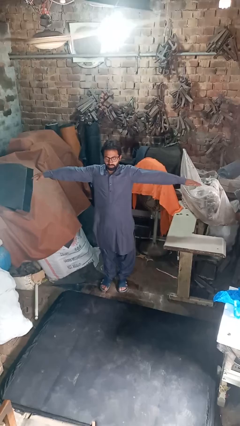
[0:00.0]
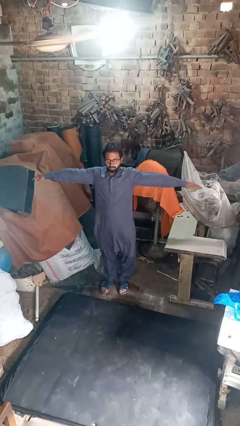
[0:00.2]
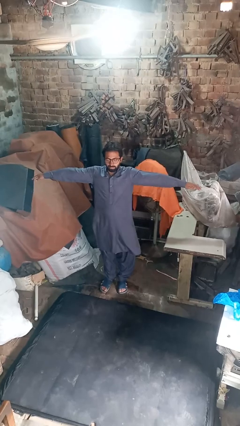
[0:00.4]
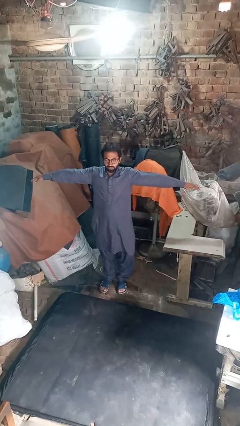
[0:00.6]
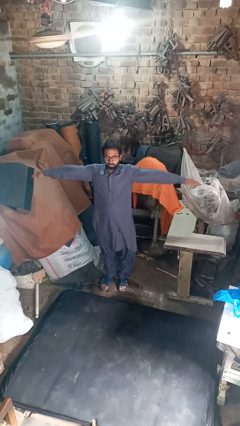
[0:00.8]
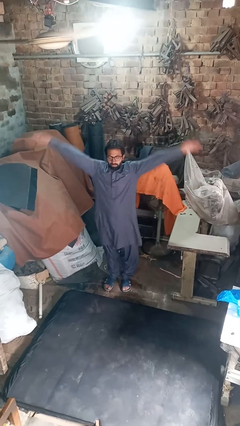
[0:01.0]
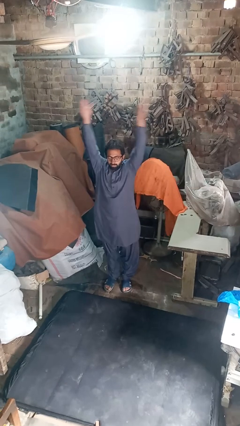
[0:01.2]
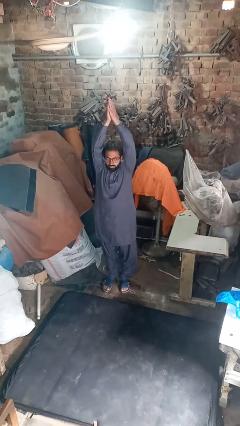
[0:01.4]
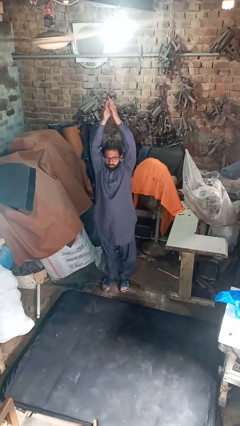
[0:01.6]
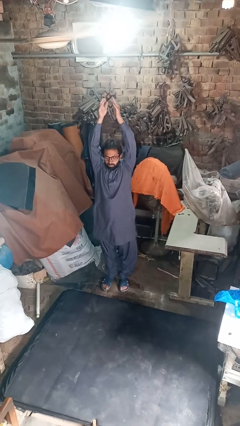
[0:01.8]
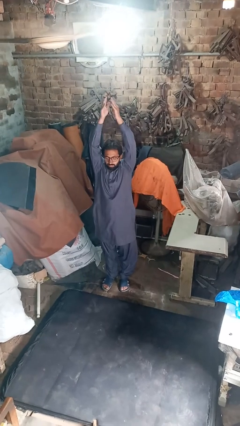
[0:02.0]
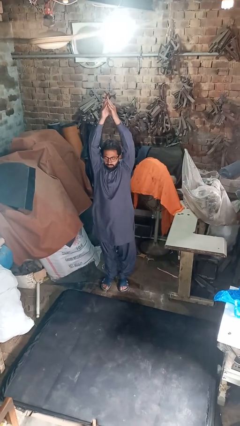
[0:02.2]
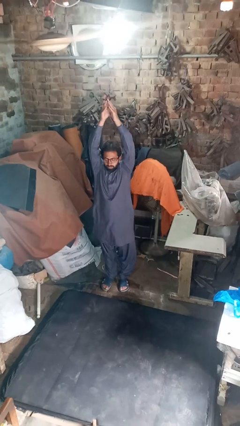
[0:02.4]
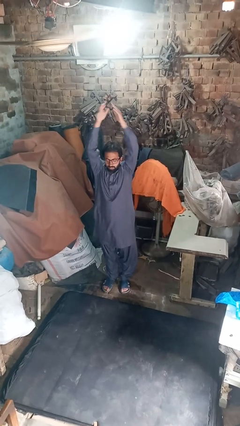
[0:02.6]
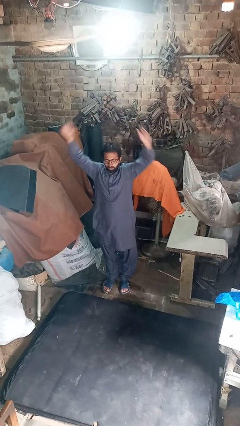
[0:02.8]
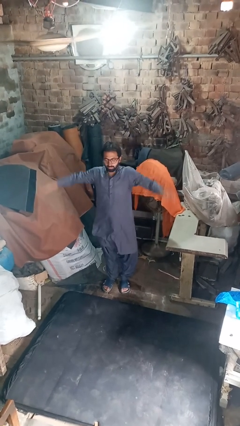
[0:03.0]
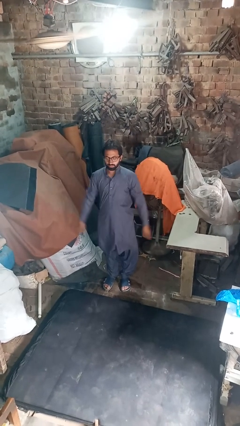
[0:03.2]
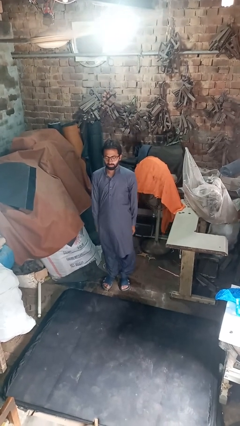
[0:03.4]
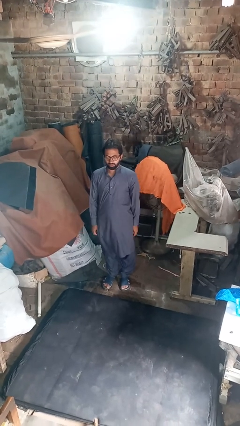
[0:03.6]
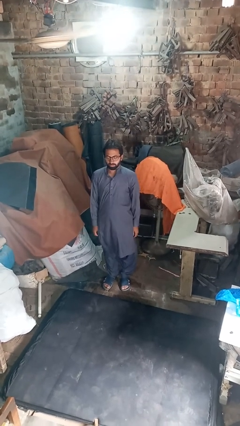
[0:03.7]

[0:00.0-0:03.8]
person stretches arms over head

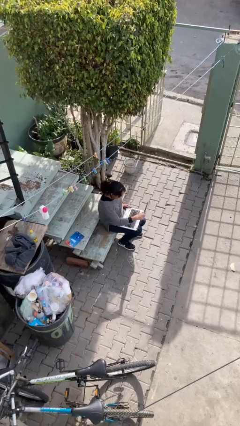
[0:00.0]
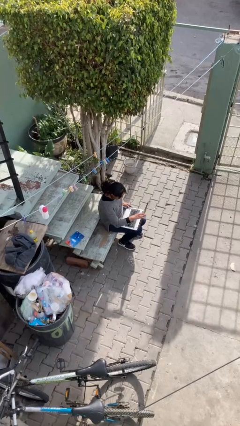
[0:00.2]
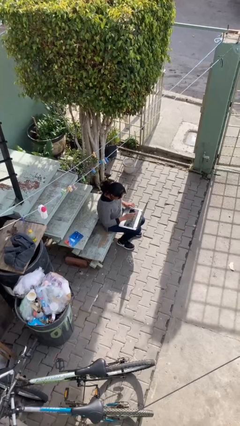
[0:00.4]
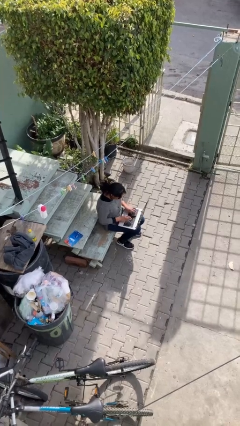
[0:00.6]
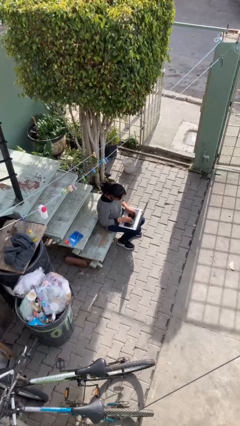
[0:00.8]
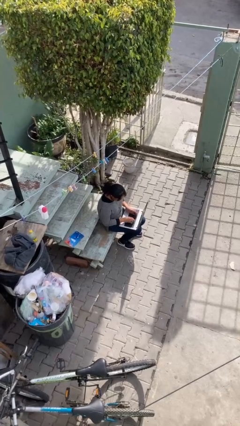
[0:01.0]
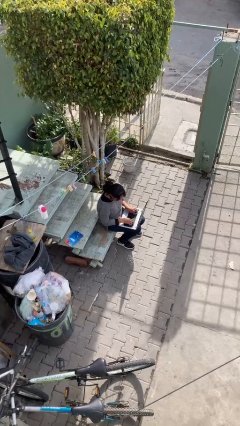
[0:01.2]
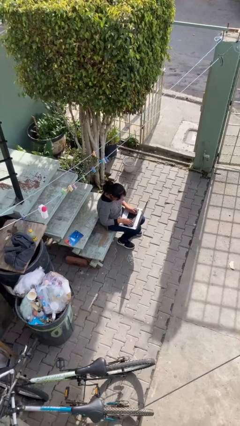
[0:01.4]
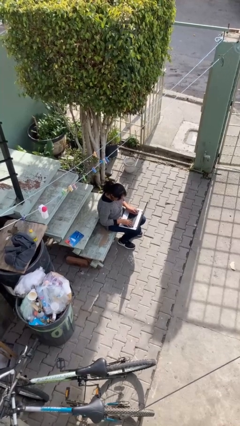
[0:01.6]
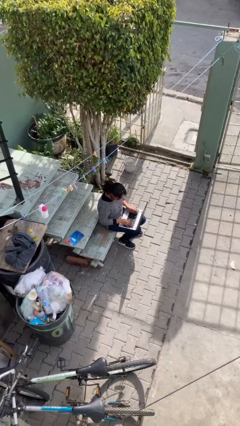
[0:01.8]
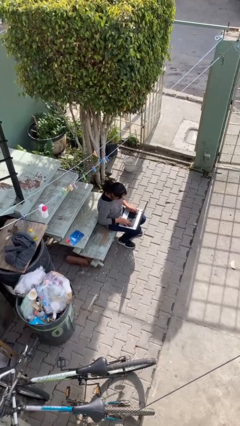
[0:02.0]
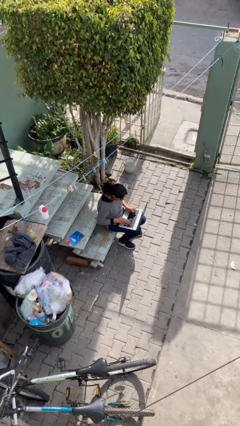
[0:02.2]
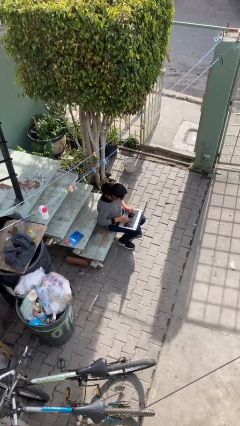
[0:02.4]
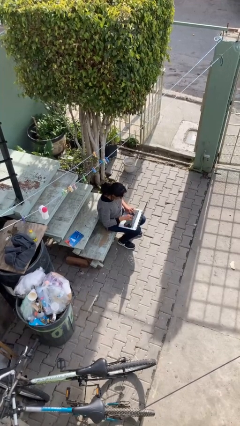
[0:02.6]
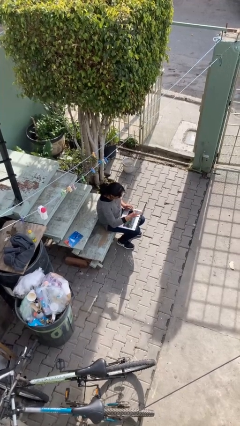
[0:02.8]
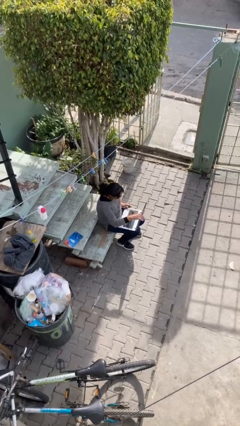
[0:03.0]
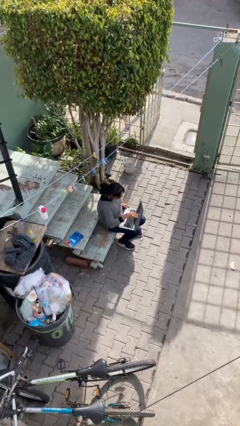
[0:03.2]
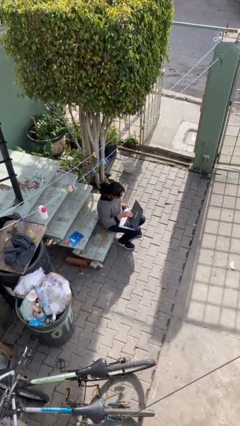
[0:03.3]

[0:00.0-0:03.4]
person interacts with laptop

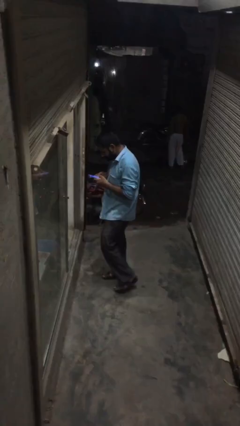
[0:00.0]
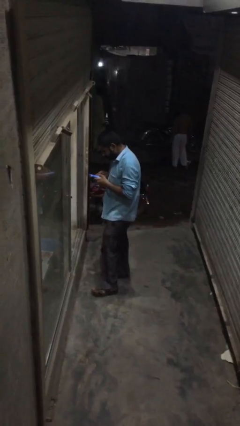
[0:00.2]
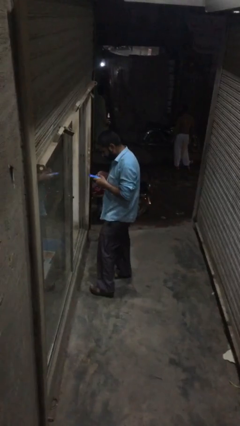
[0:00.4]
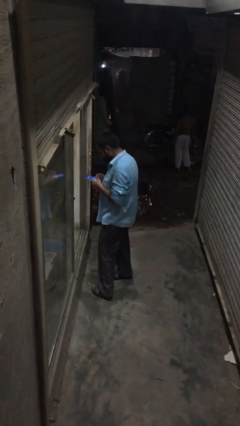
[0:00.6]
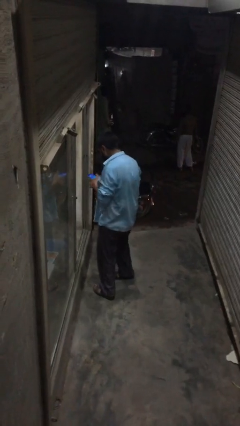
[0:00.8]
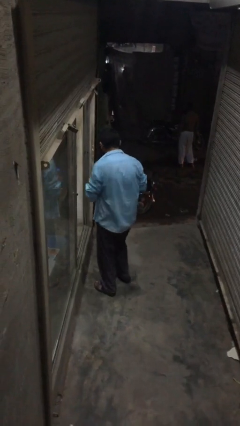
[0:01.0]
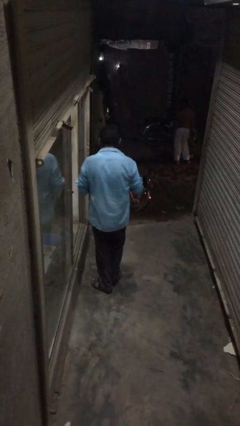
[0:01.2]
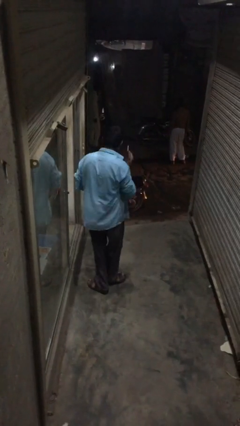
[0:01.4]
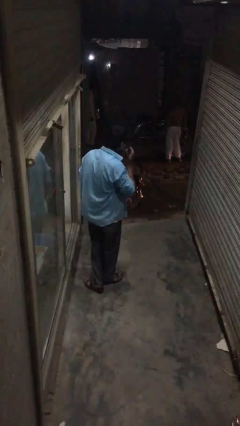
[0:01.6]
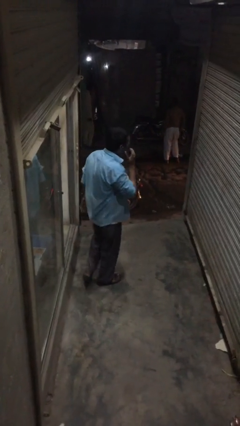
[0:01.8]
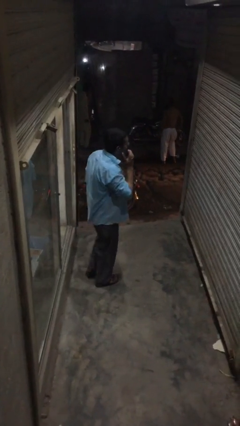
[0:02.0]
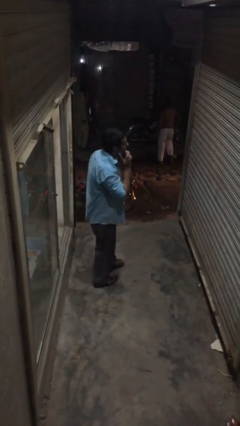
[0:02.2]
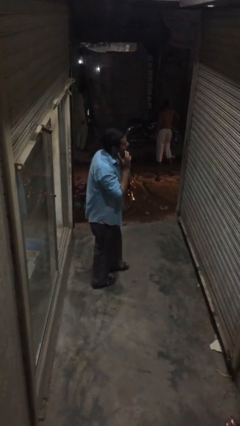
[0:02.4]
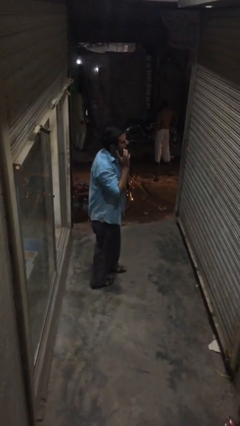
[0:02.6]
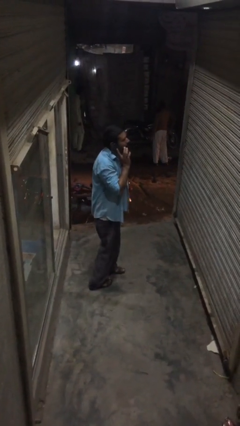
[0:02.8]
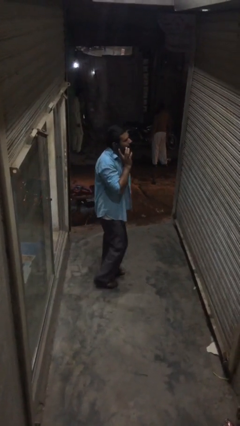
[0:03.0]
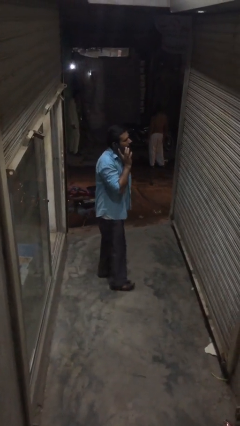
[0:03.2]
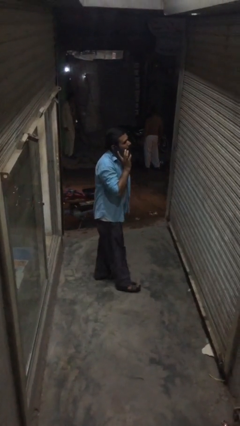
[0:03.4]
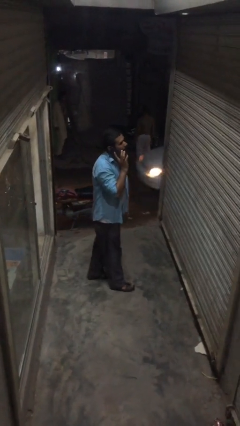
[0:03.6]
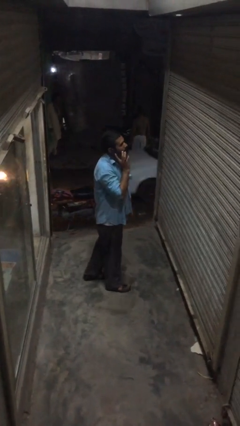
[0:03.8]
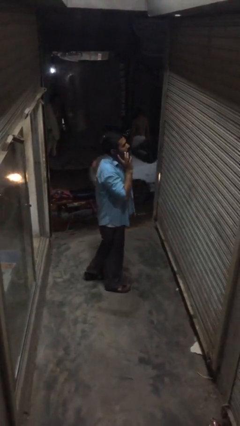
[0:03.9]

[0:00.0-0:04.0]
person talks on phone

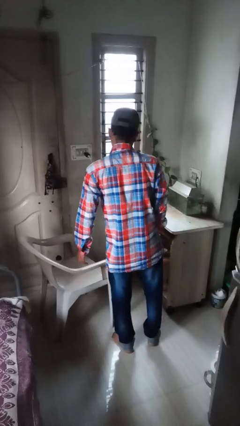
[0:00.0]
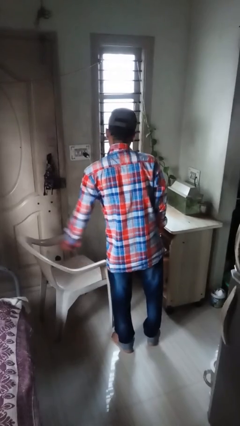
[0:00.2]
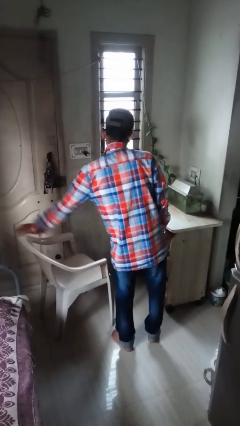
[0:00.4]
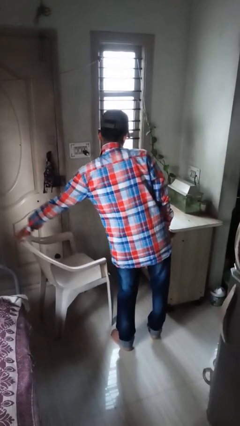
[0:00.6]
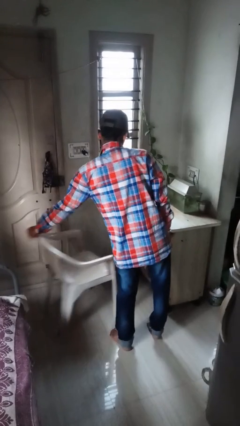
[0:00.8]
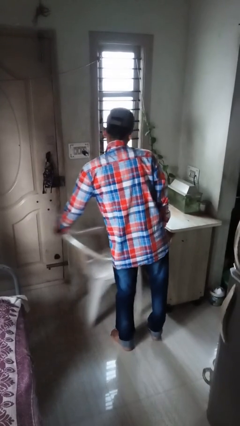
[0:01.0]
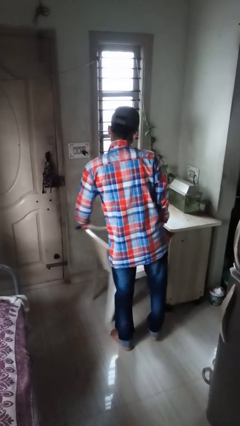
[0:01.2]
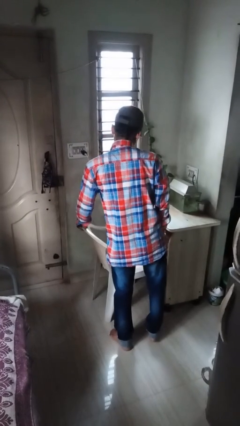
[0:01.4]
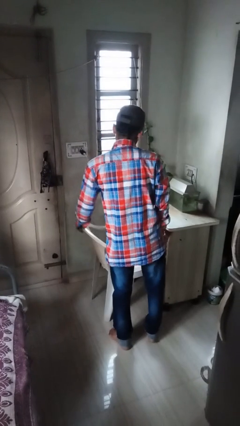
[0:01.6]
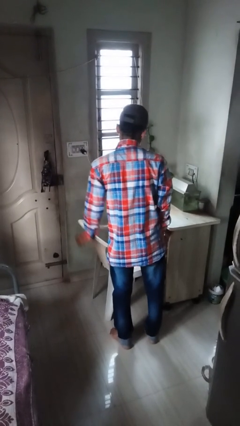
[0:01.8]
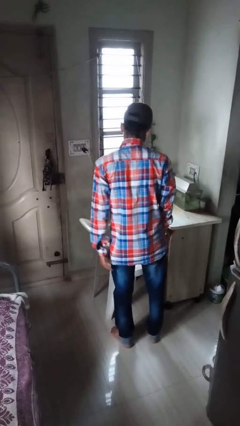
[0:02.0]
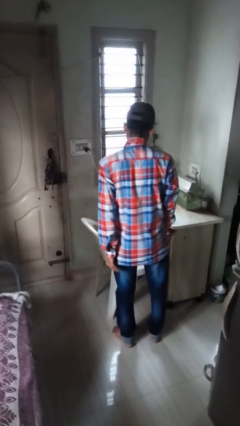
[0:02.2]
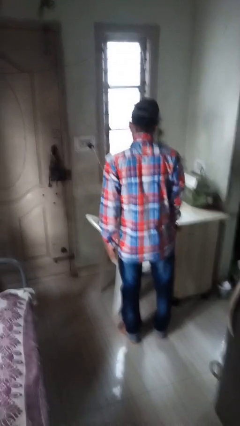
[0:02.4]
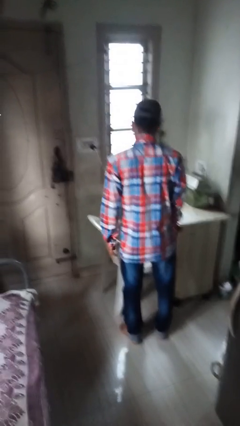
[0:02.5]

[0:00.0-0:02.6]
person pushes in chair

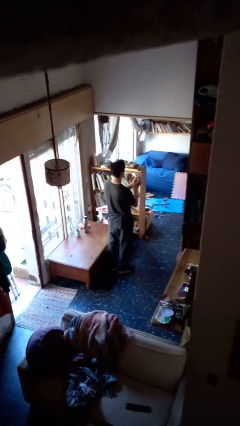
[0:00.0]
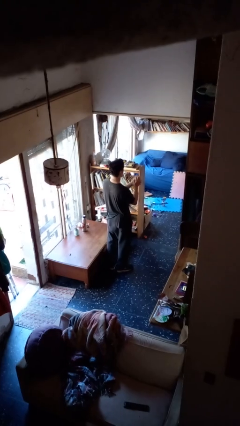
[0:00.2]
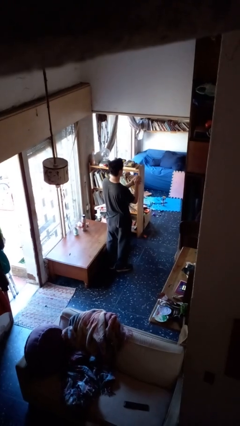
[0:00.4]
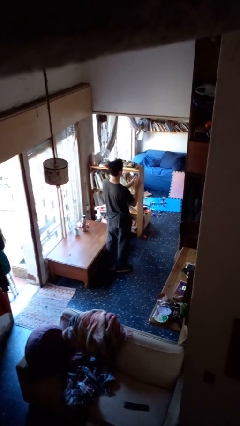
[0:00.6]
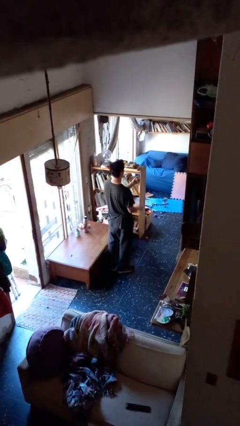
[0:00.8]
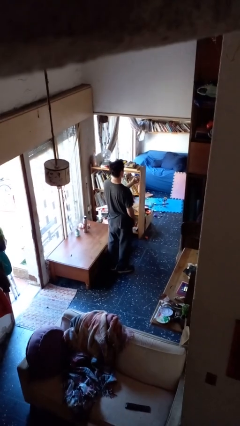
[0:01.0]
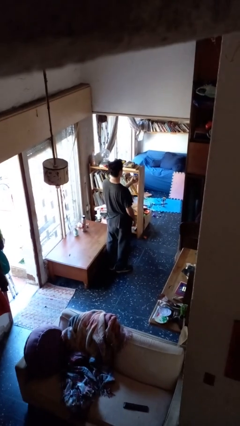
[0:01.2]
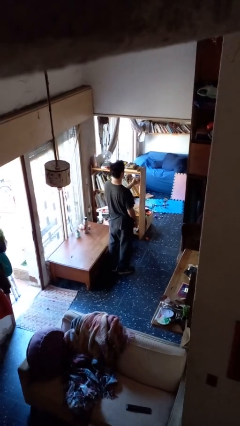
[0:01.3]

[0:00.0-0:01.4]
person crumples paper

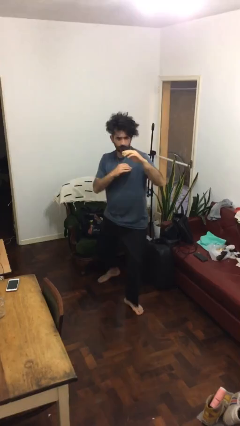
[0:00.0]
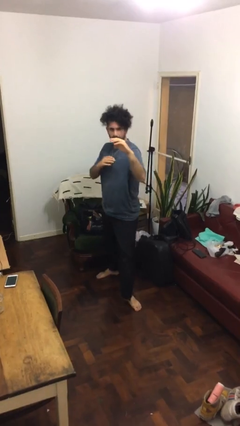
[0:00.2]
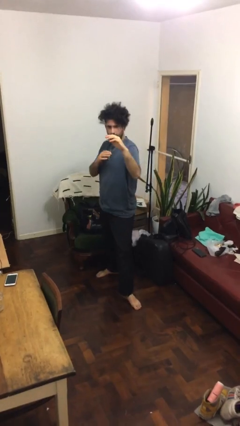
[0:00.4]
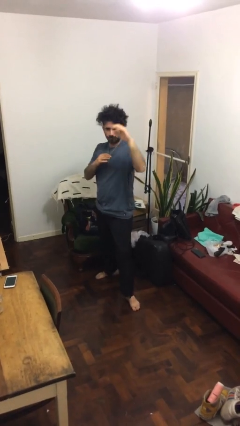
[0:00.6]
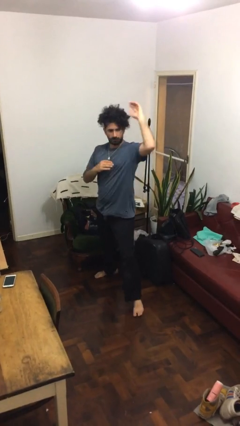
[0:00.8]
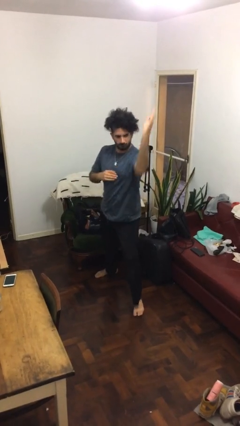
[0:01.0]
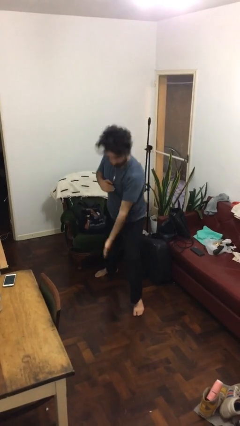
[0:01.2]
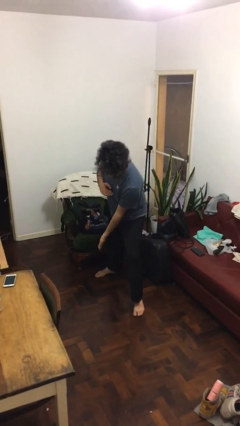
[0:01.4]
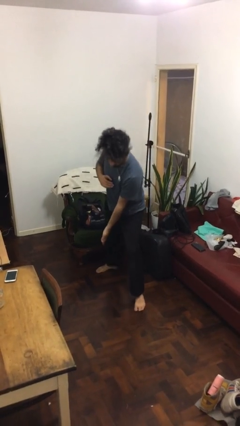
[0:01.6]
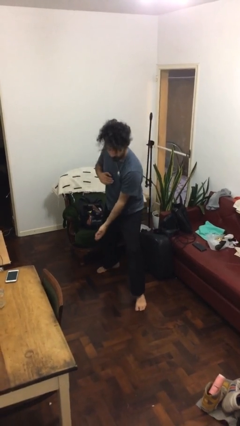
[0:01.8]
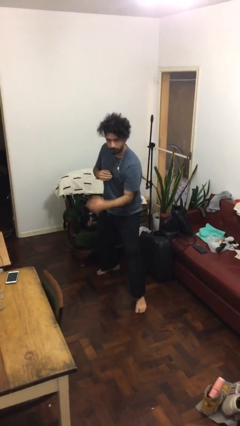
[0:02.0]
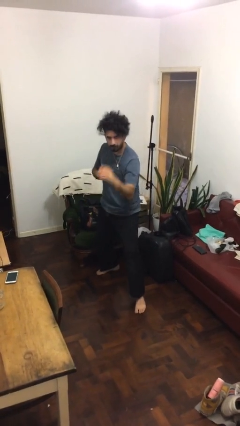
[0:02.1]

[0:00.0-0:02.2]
person karate chop

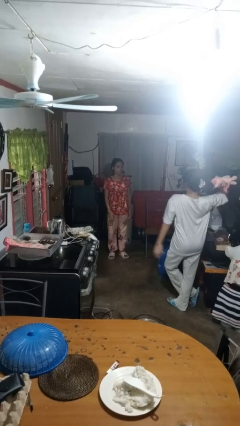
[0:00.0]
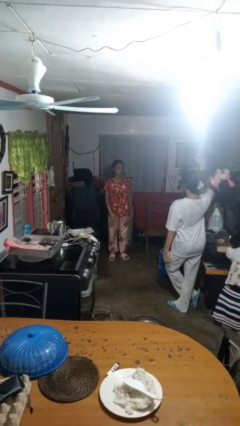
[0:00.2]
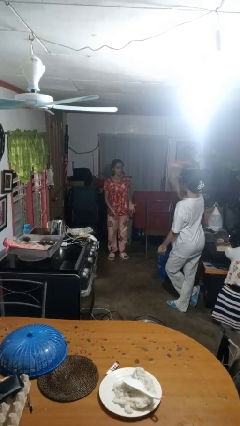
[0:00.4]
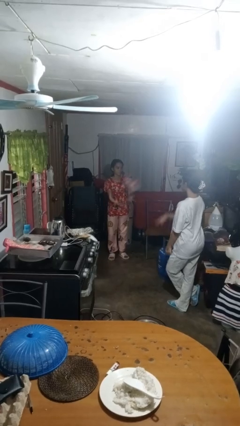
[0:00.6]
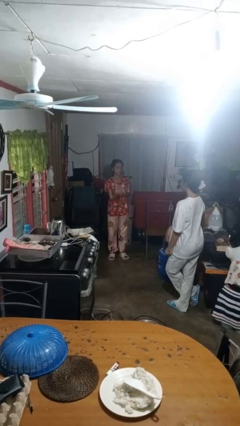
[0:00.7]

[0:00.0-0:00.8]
person catches object from person
